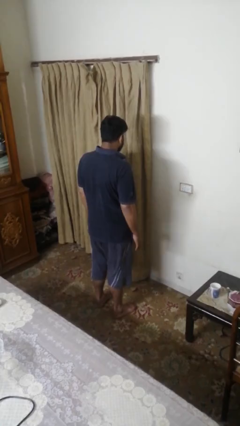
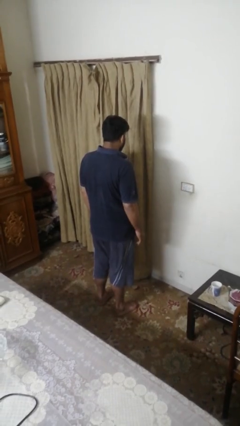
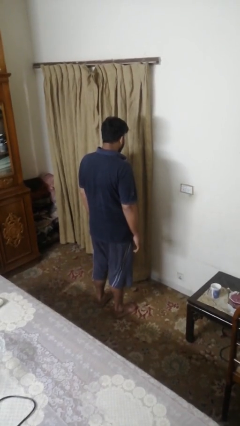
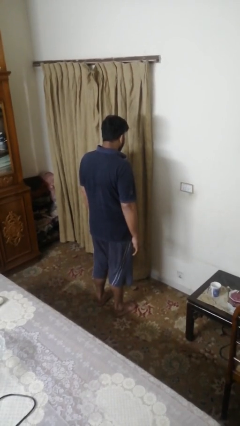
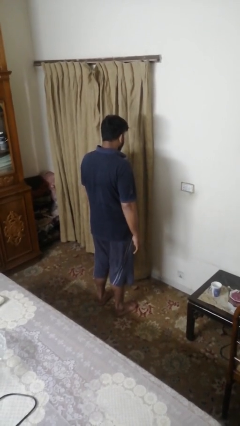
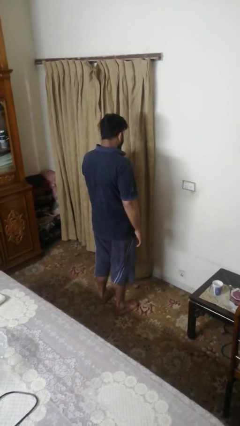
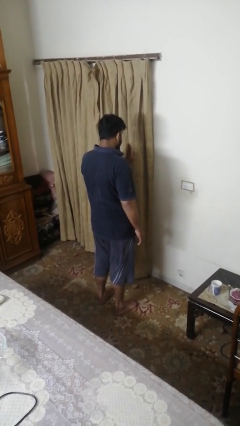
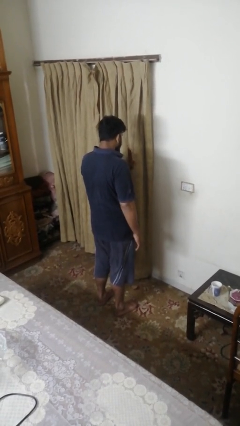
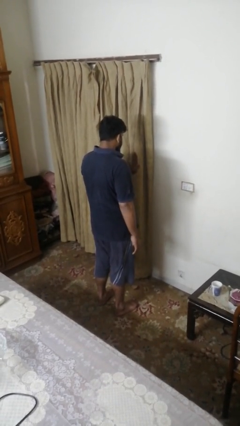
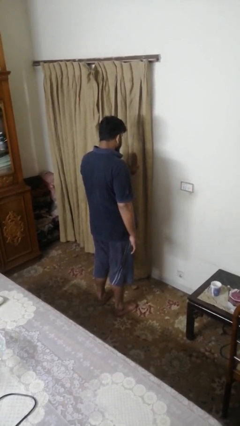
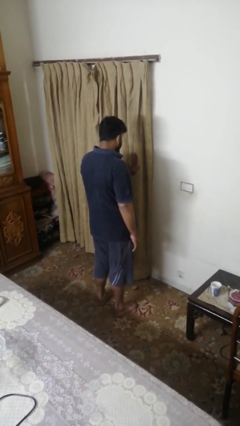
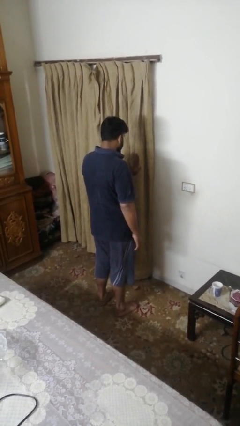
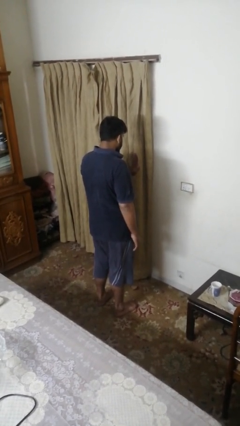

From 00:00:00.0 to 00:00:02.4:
person gestures stop

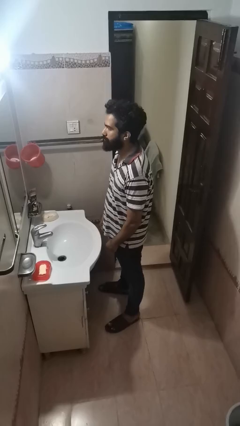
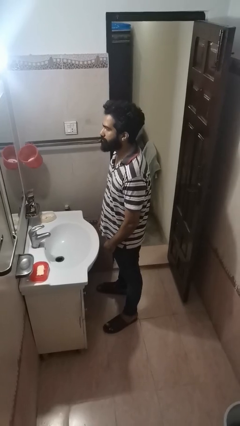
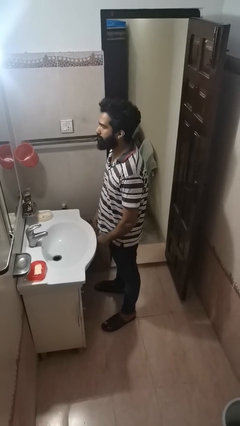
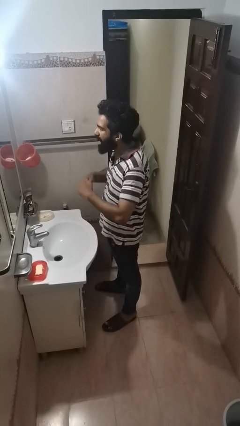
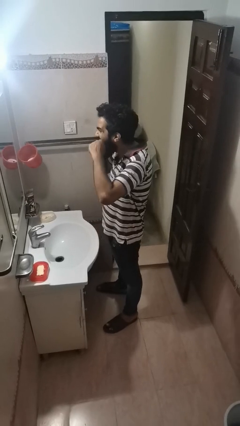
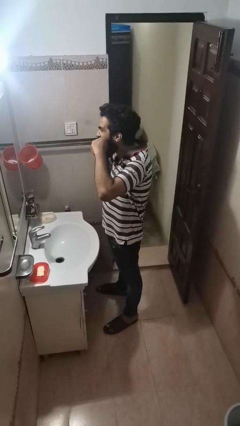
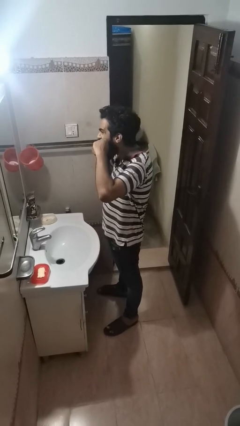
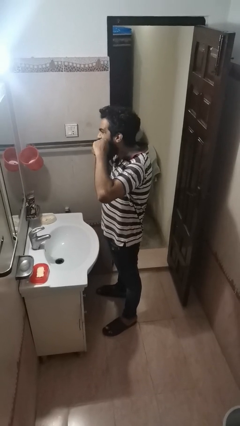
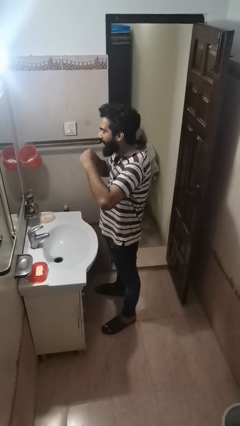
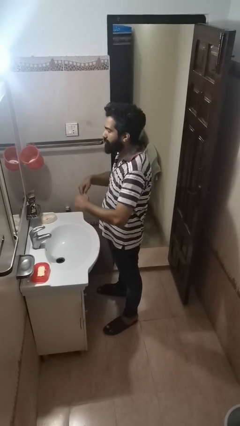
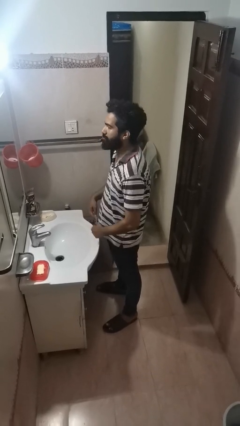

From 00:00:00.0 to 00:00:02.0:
person flosses

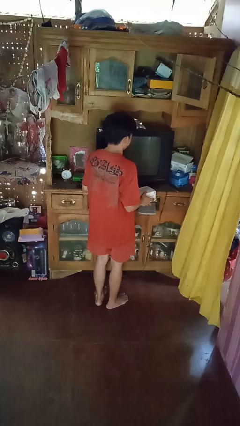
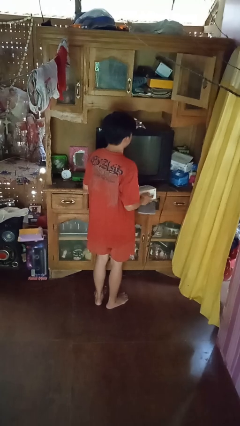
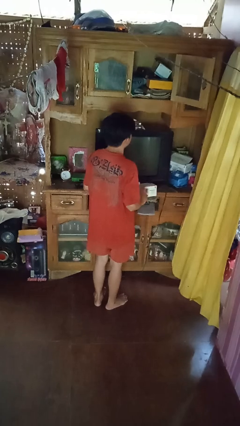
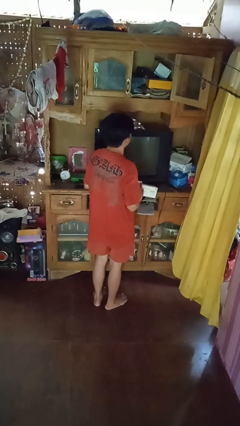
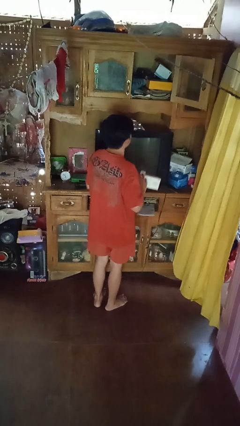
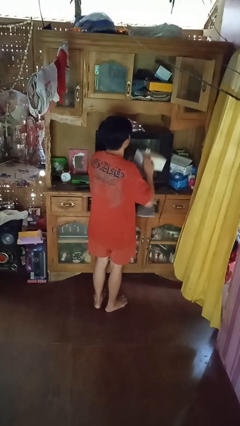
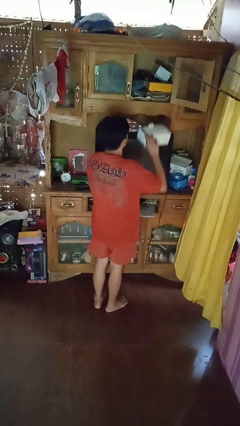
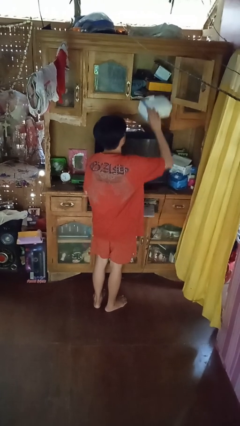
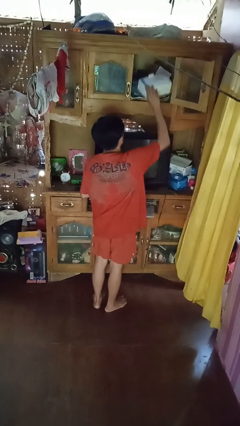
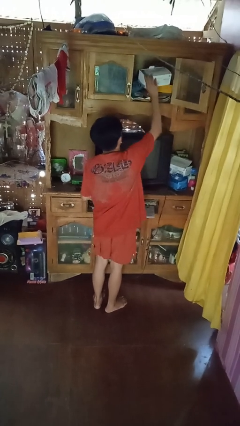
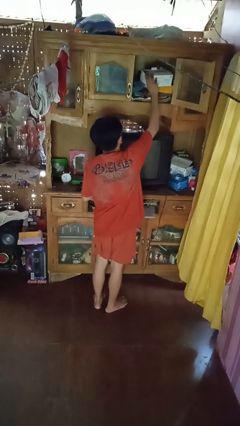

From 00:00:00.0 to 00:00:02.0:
person puts down object on shelf

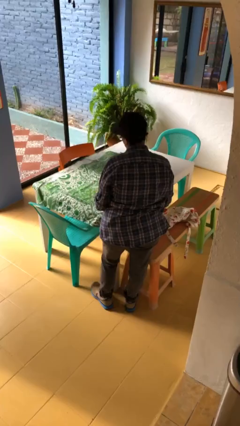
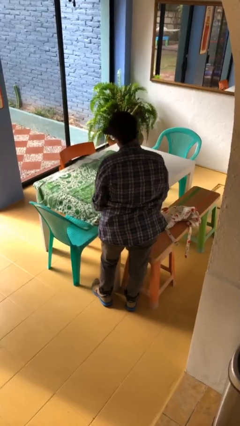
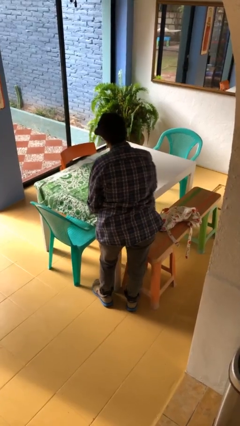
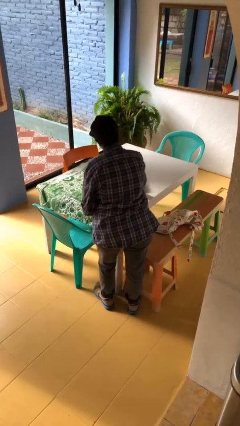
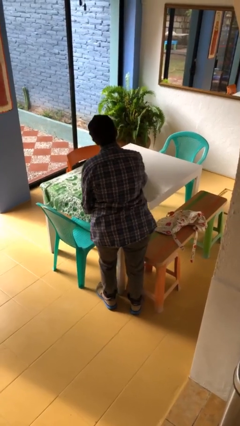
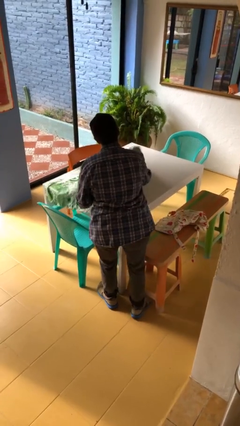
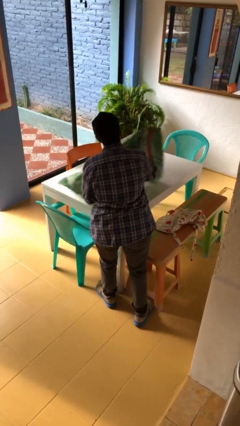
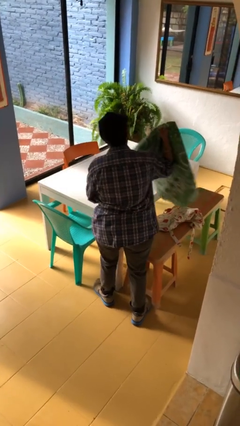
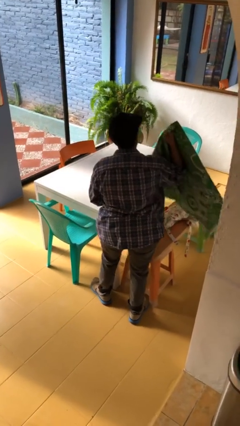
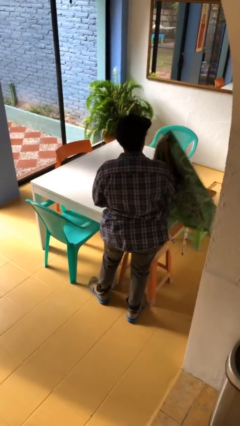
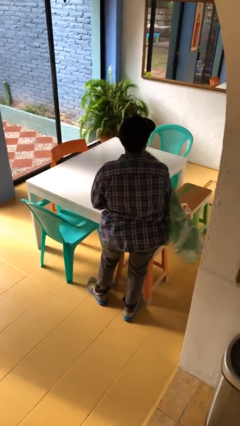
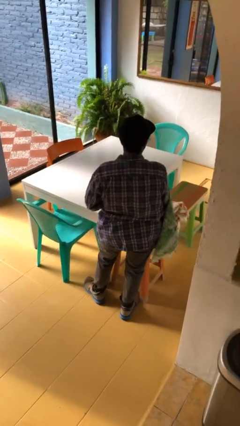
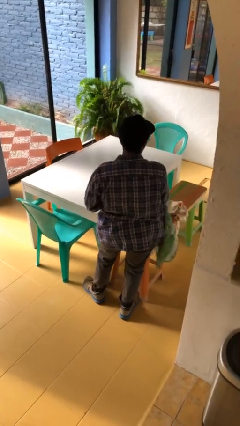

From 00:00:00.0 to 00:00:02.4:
person folds tablecloth

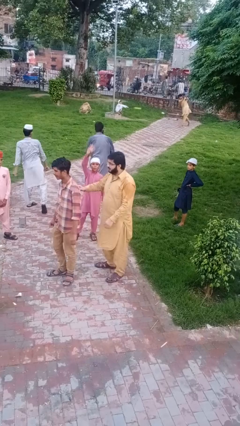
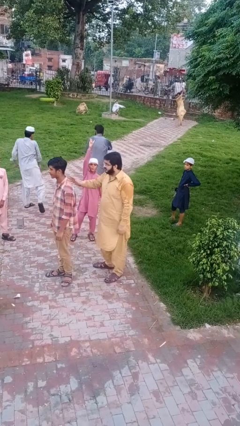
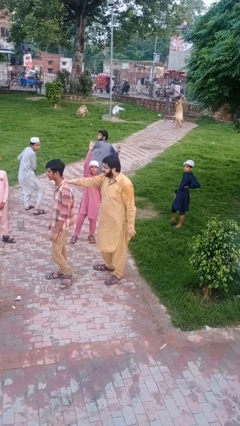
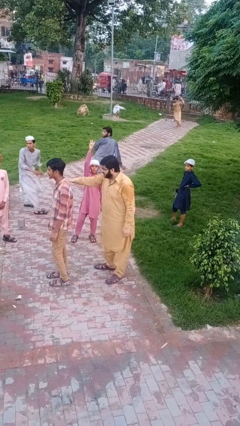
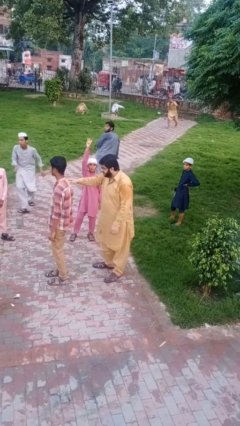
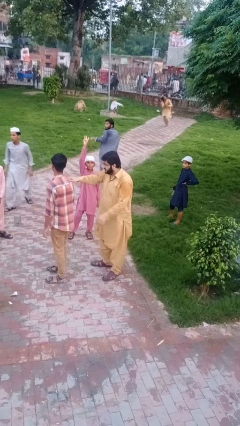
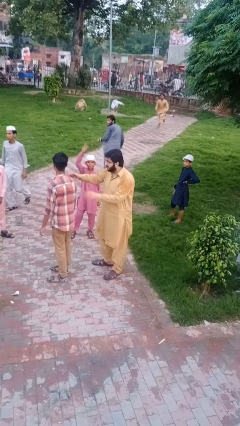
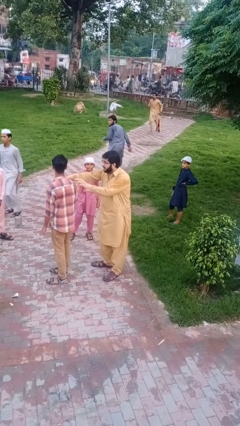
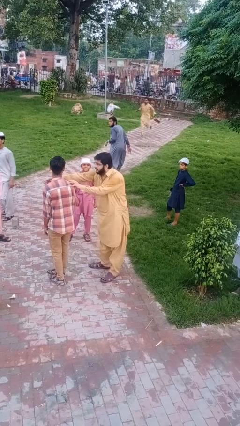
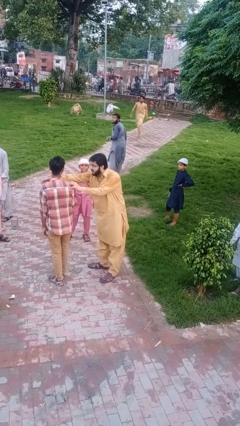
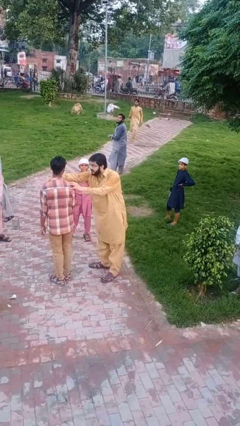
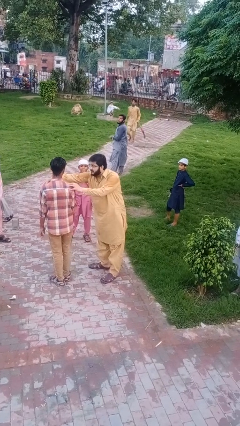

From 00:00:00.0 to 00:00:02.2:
person grabs person by shoulder

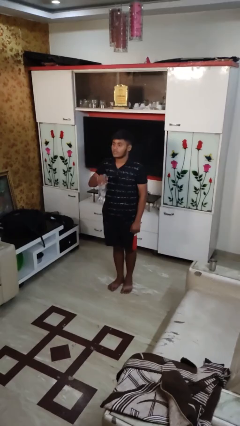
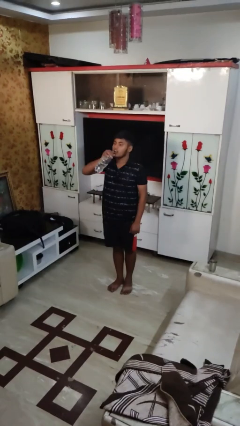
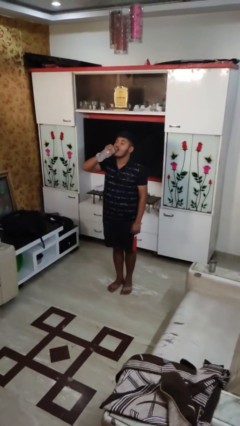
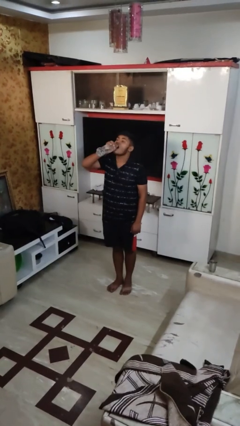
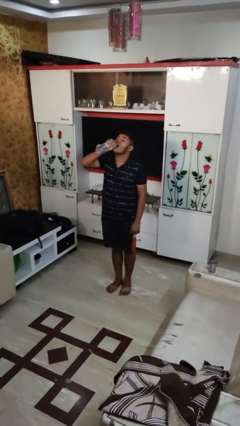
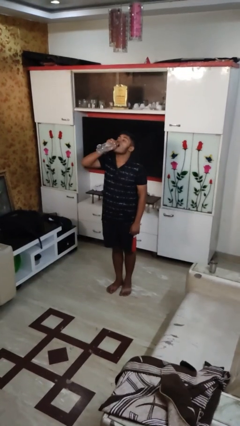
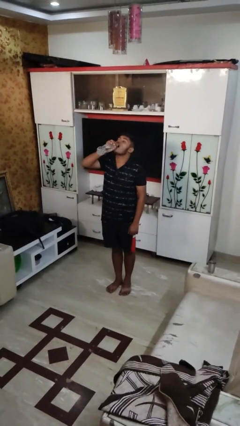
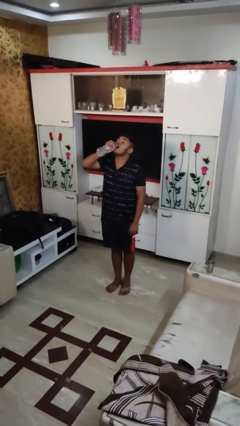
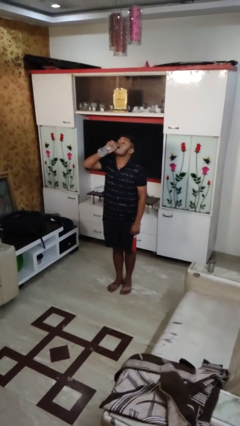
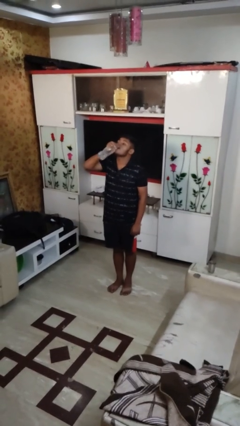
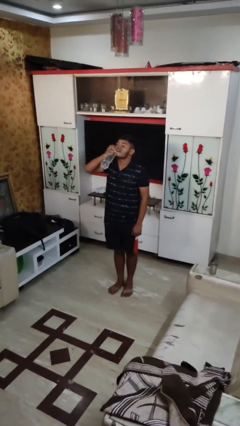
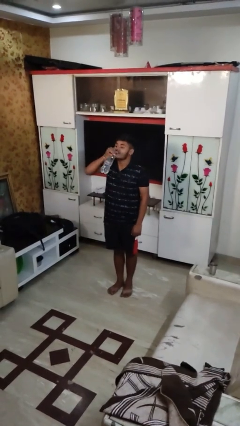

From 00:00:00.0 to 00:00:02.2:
person drinks from bottle

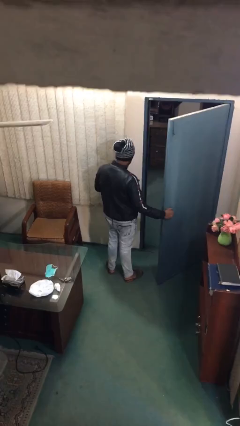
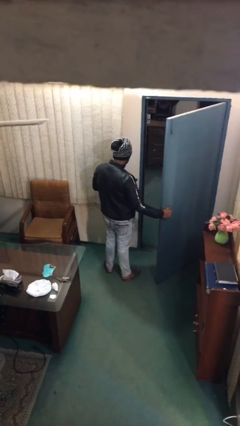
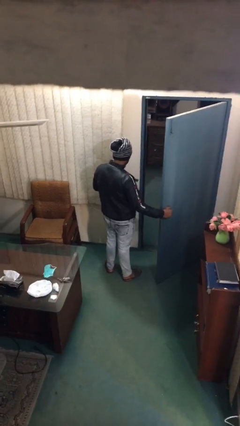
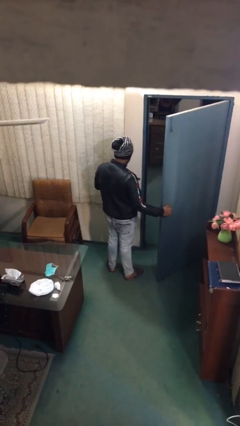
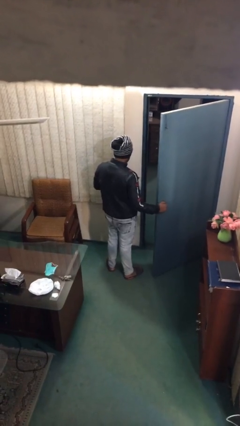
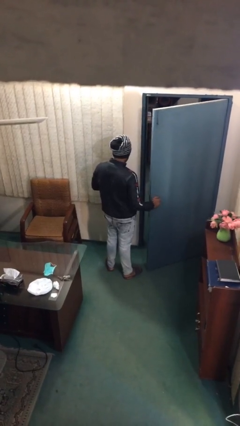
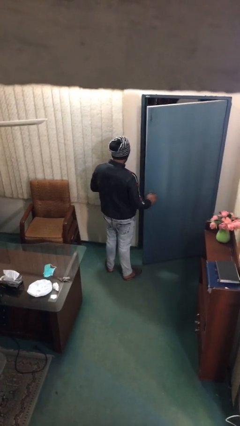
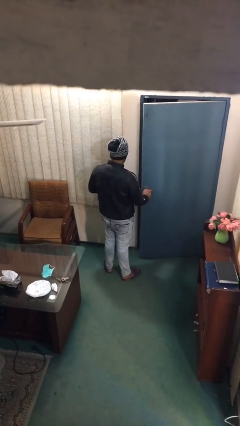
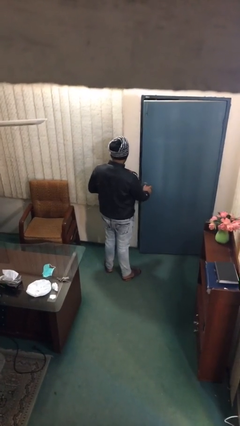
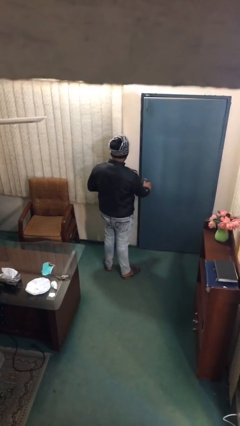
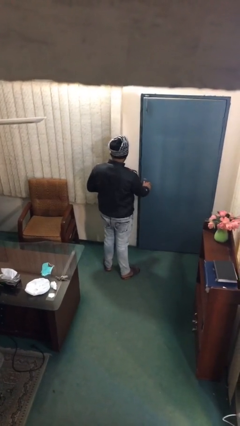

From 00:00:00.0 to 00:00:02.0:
person closes facility door

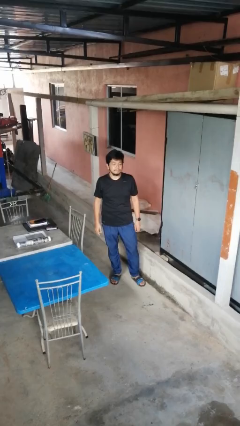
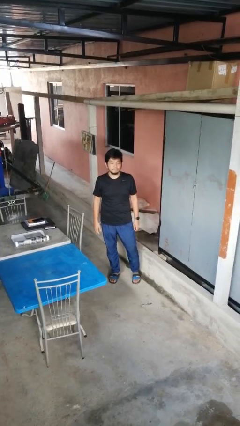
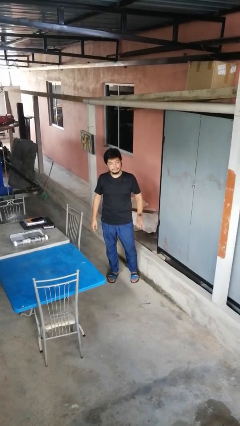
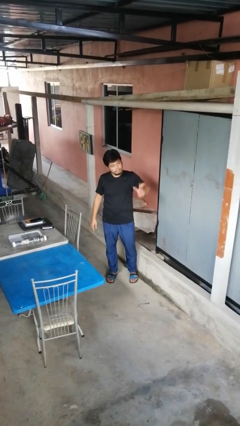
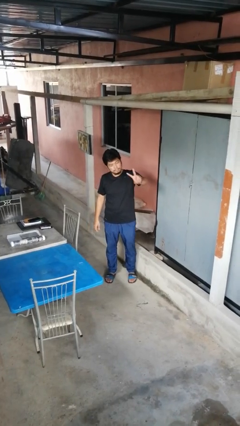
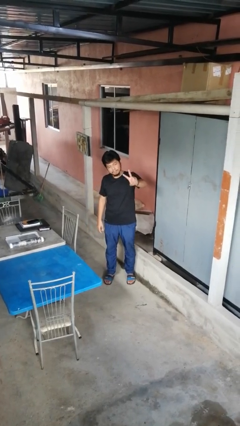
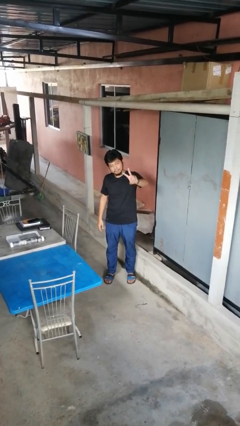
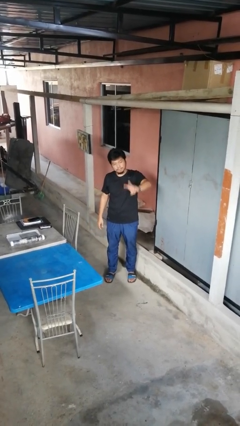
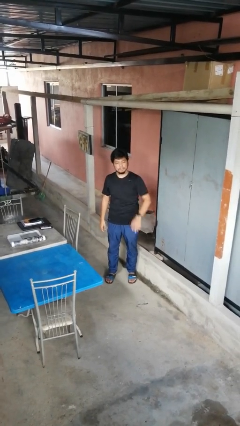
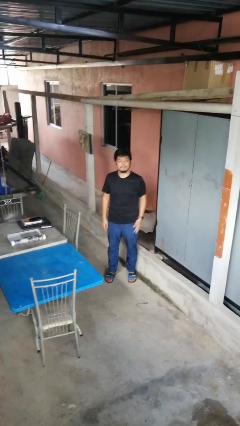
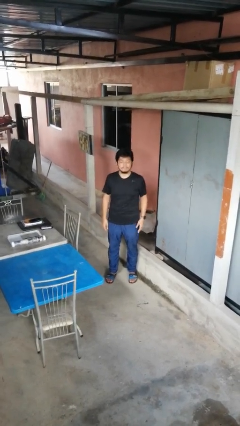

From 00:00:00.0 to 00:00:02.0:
person gestures peace
